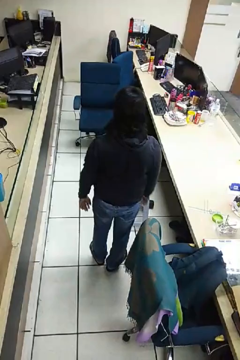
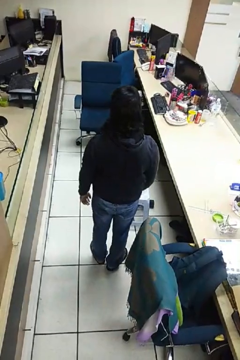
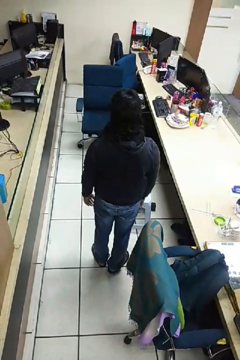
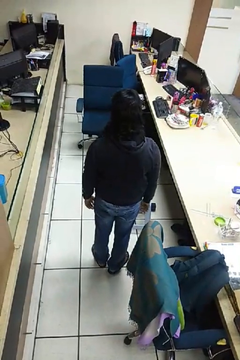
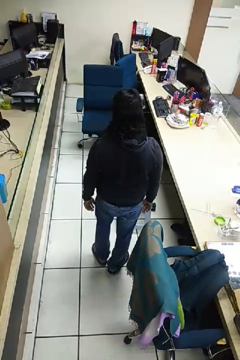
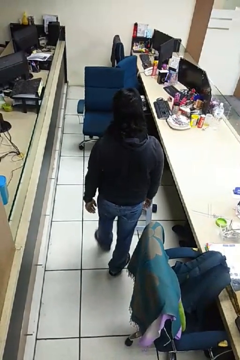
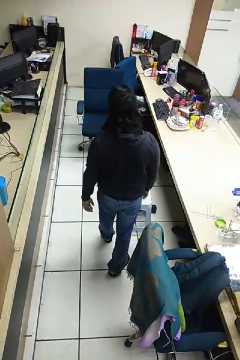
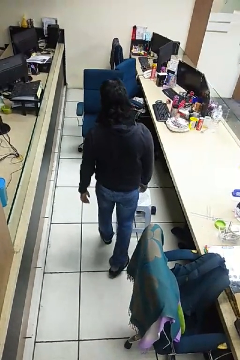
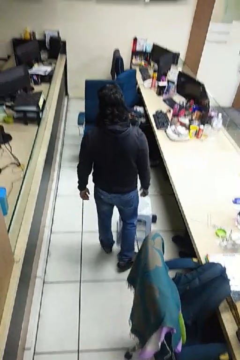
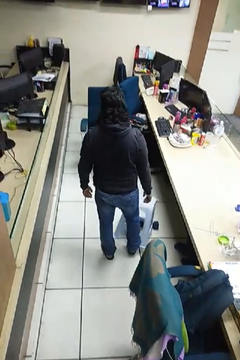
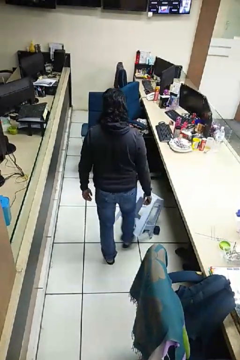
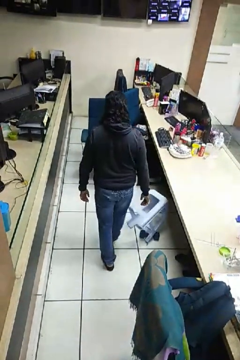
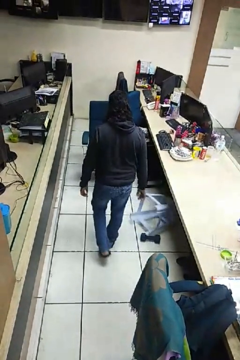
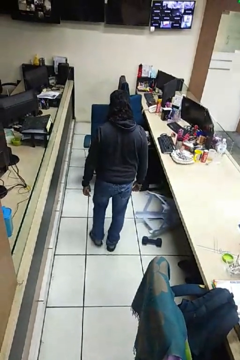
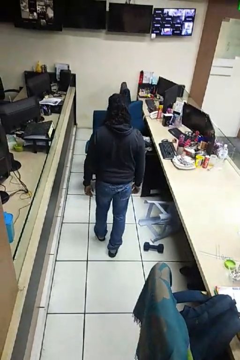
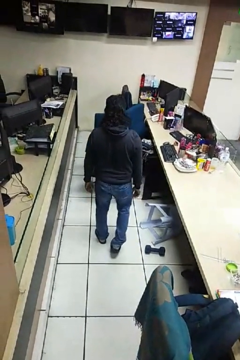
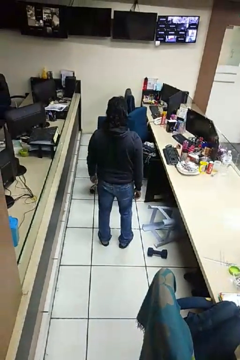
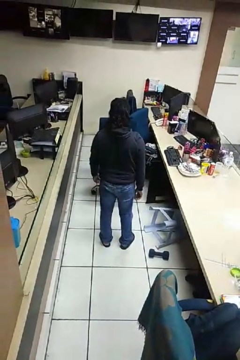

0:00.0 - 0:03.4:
person knocks over furniture

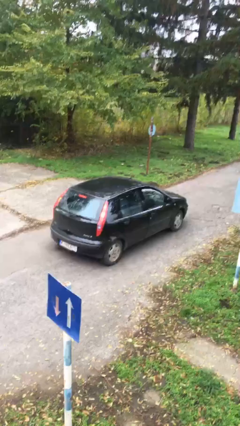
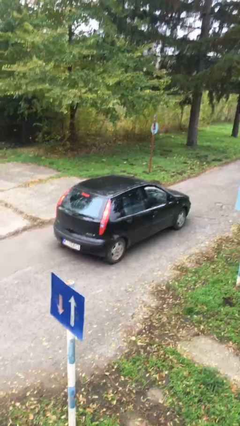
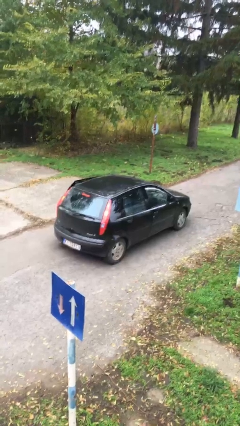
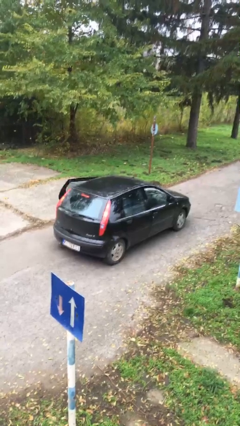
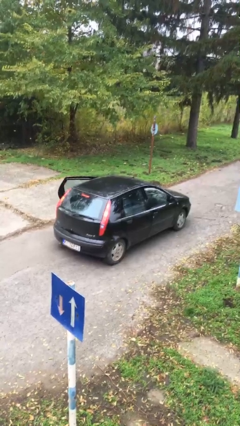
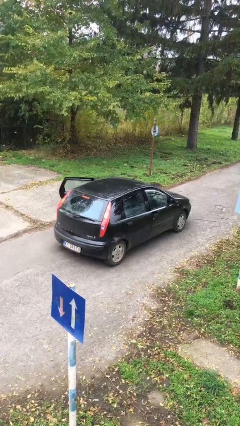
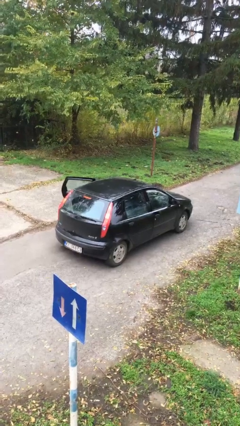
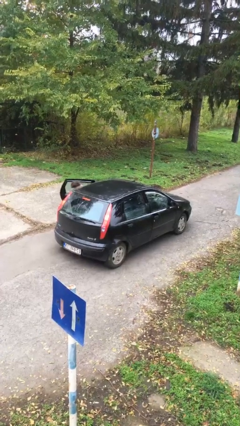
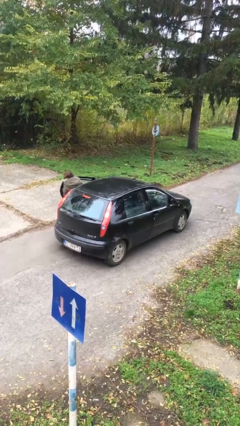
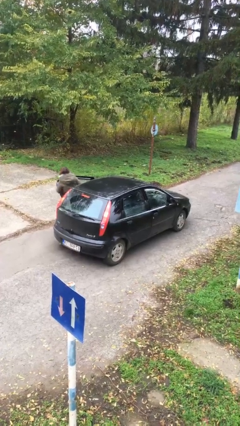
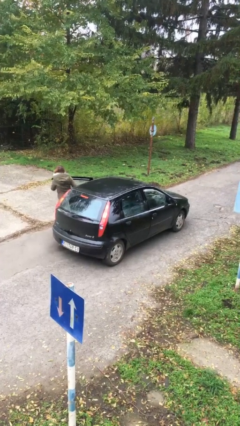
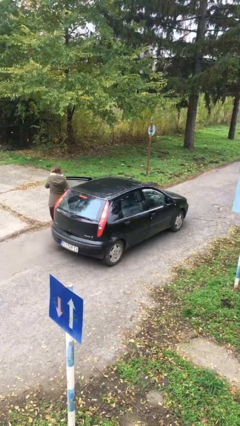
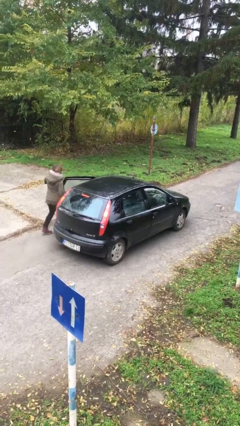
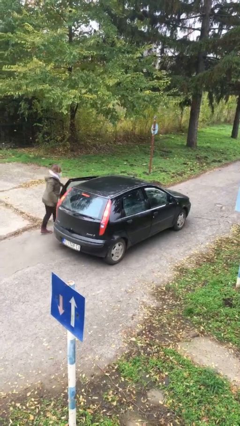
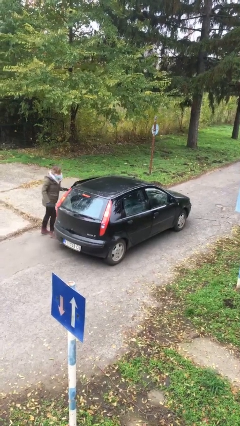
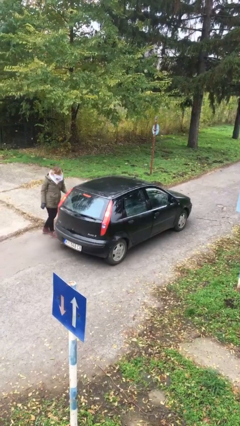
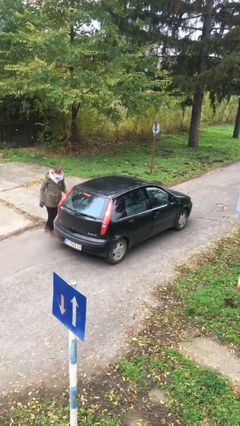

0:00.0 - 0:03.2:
car drops off person

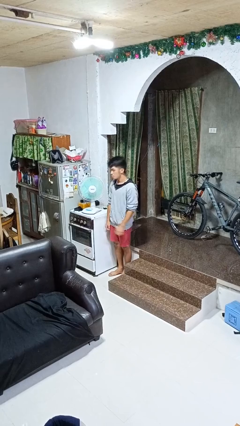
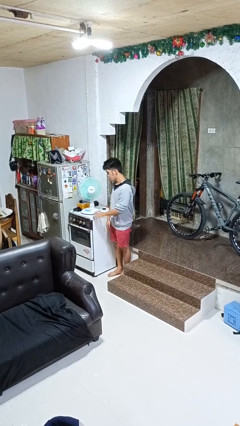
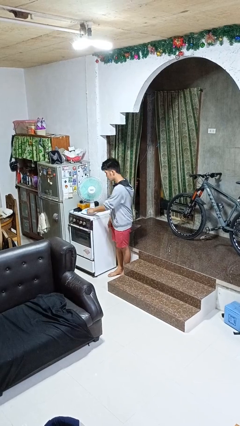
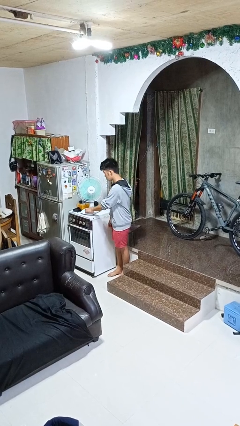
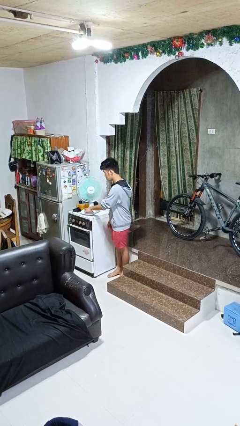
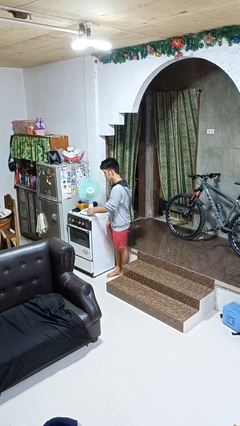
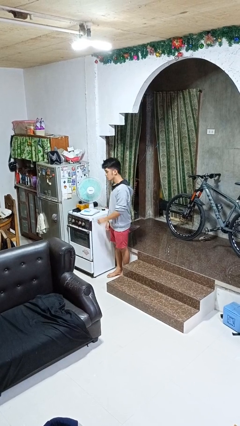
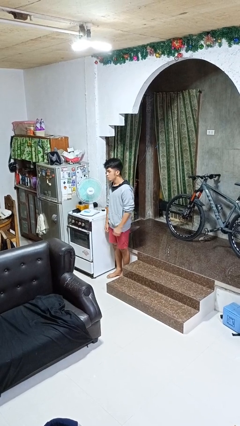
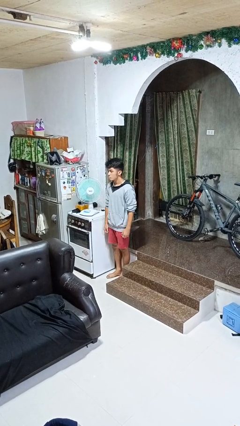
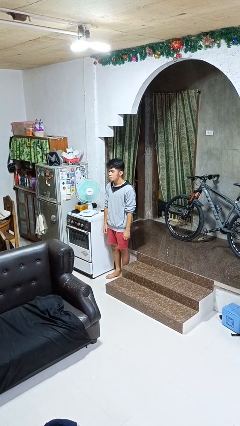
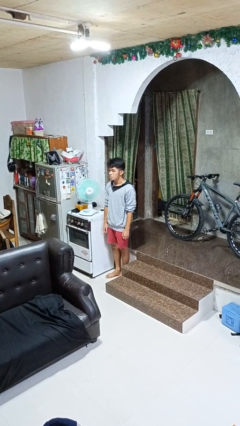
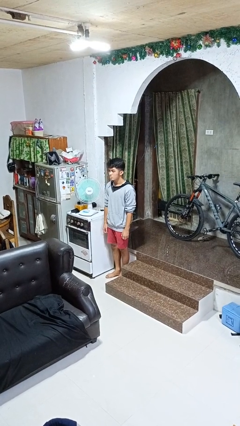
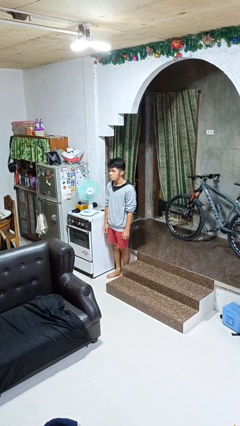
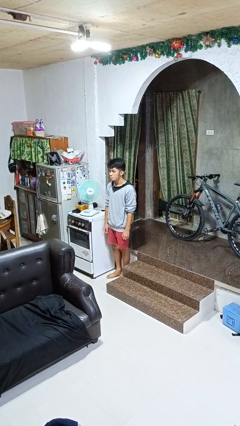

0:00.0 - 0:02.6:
person turns on fan

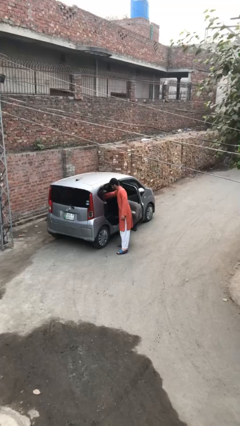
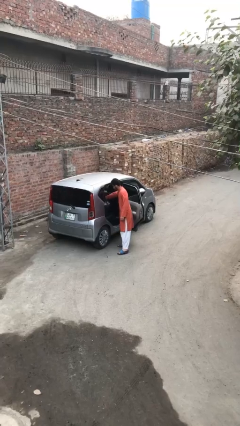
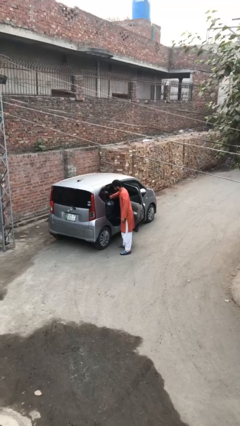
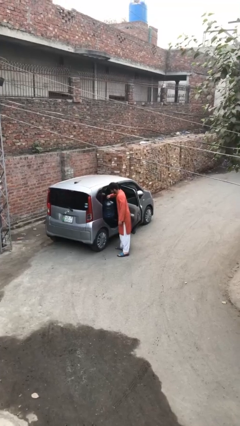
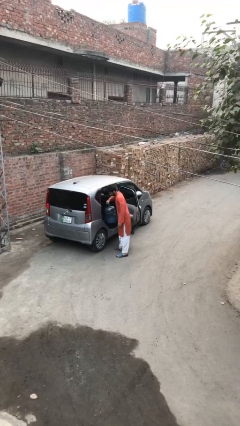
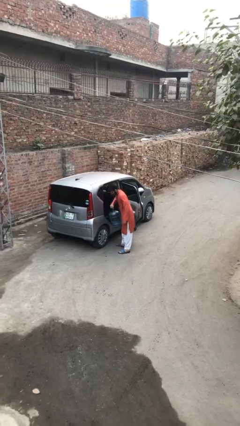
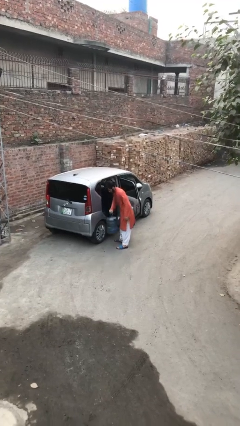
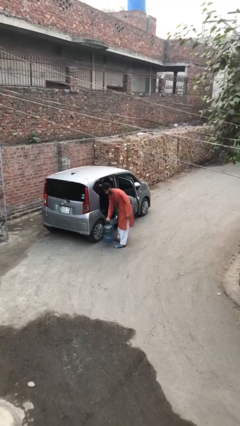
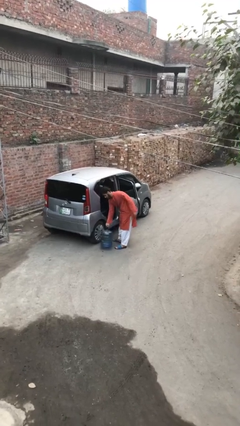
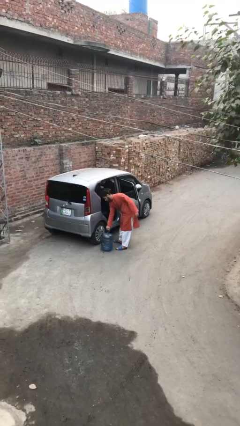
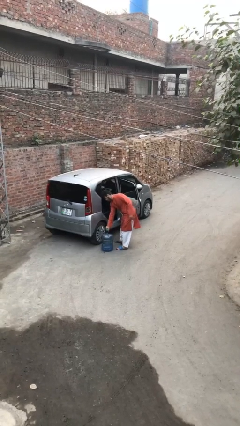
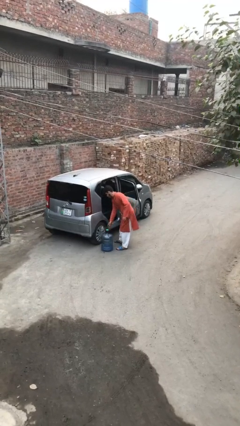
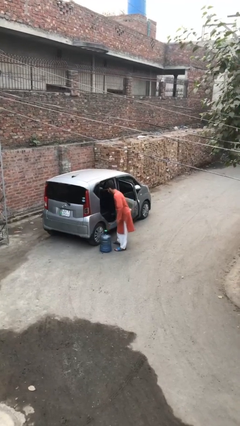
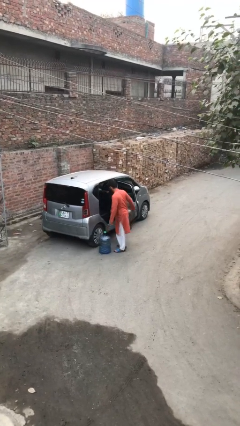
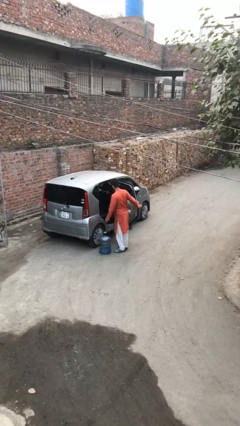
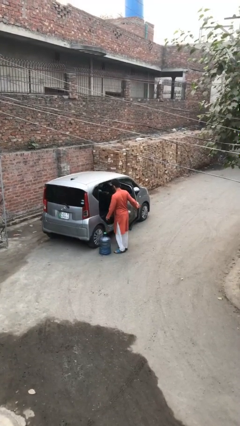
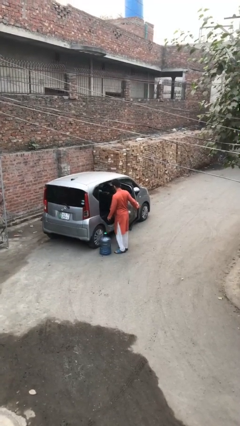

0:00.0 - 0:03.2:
person unloads car

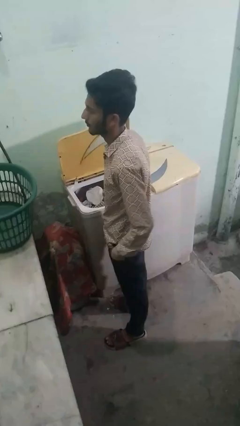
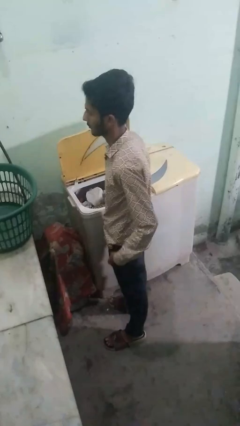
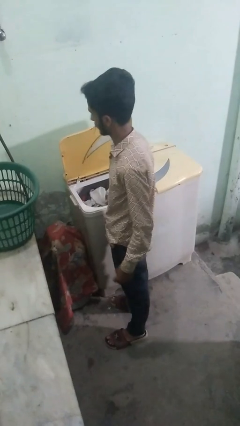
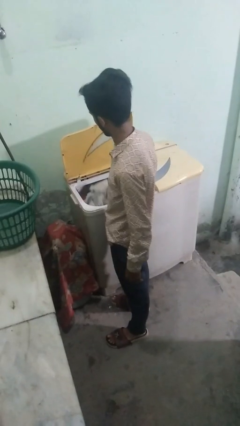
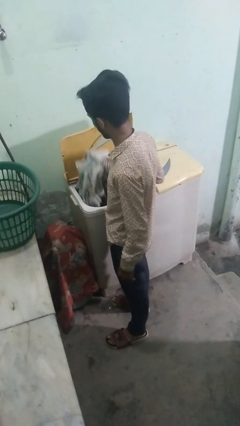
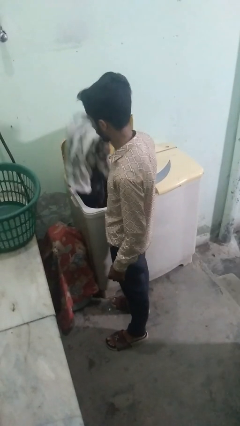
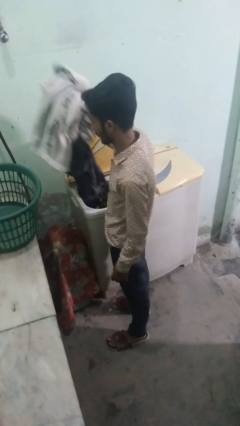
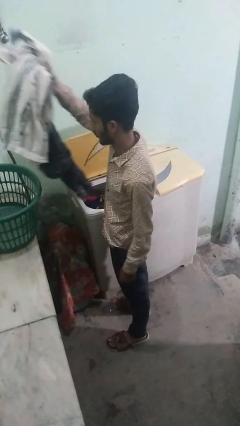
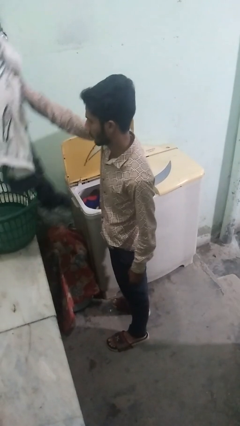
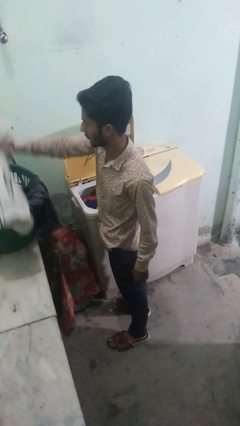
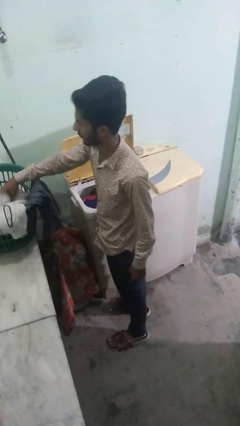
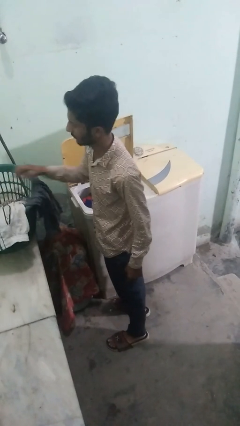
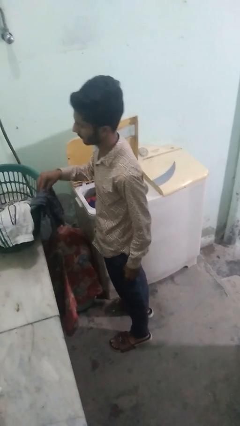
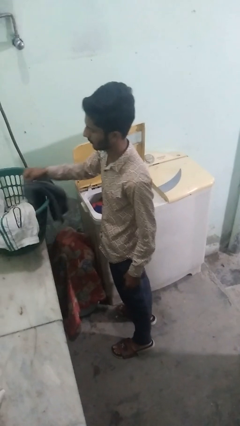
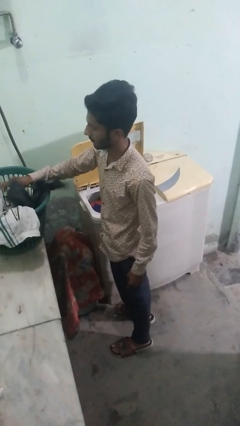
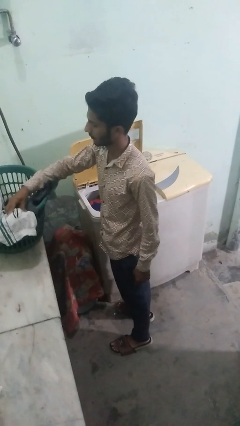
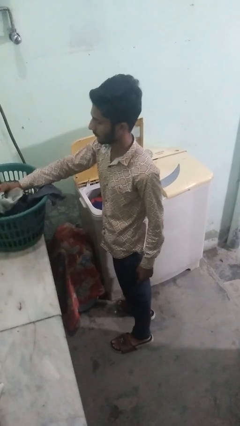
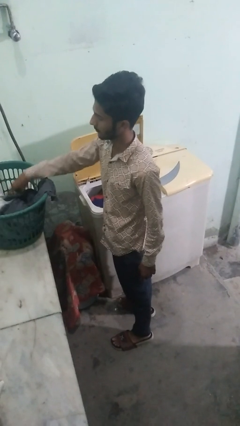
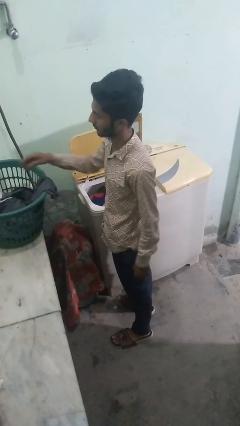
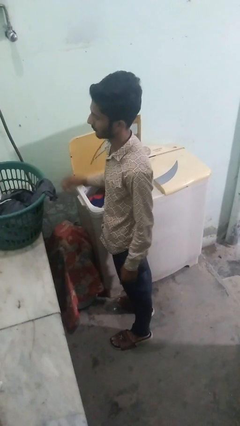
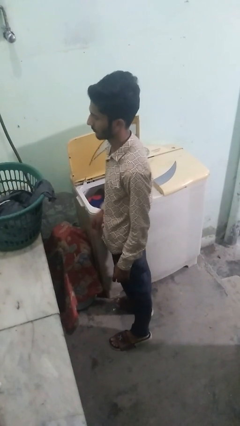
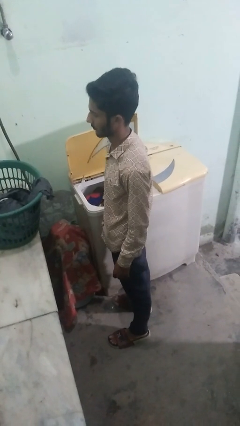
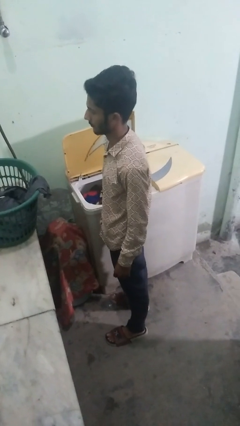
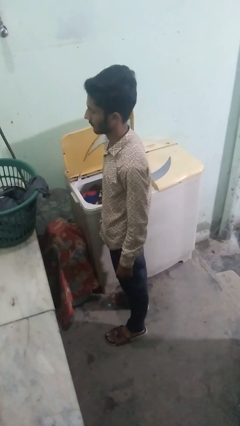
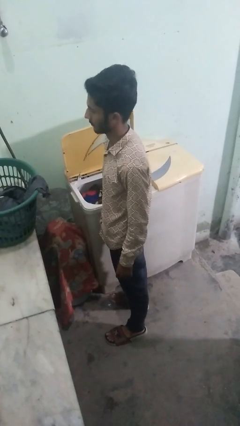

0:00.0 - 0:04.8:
person unloads clotheswasher

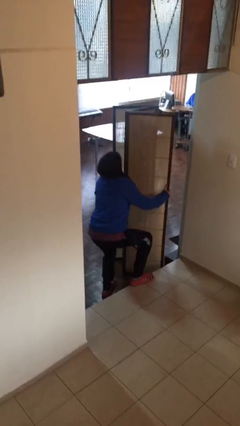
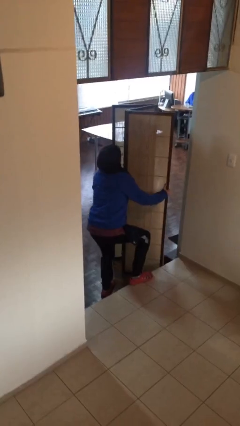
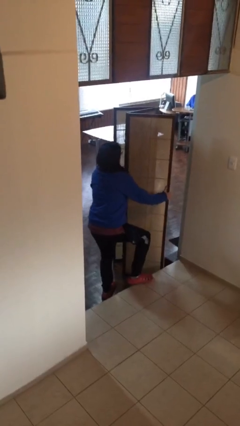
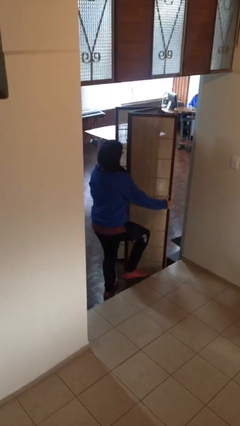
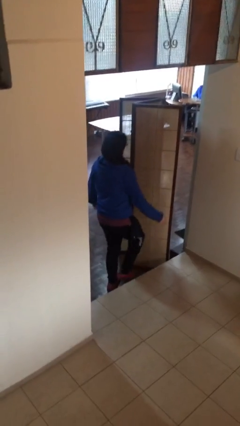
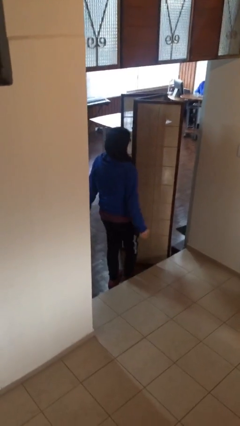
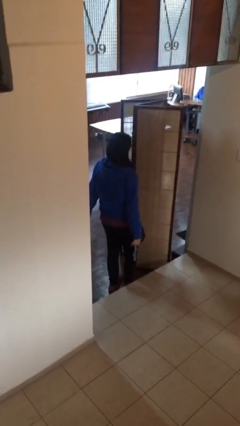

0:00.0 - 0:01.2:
person puts down object on floor
